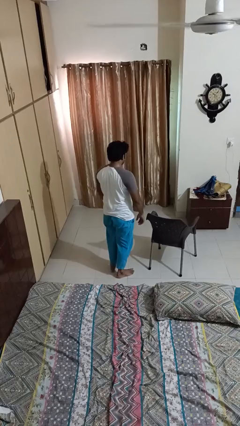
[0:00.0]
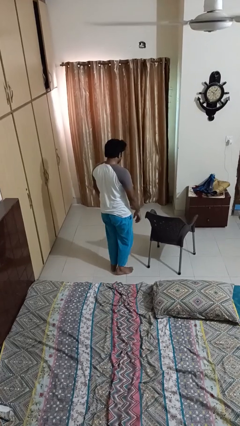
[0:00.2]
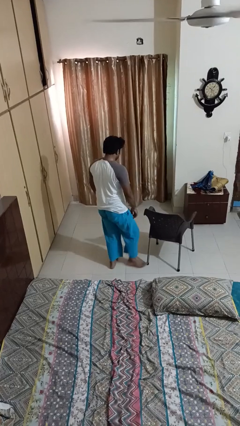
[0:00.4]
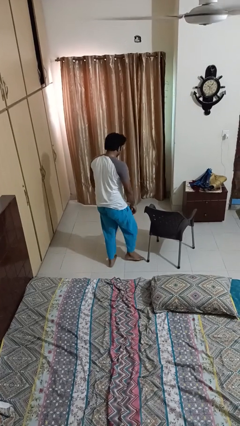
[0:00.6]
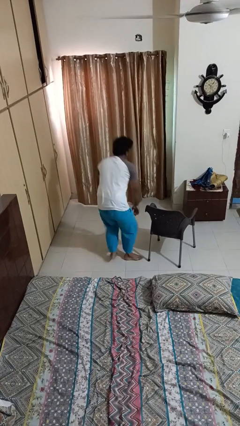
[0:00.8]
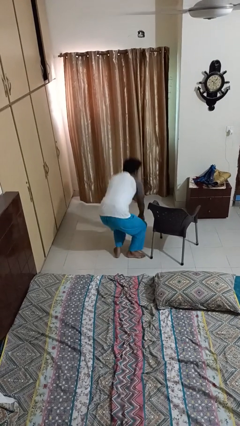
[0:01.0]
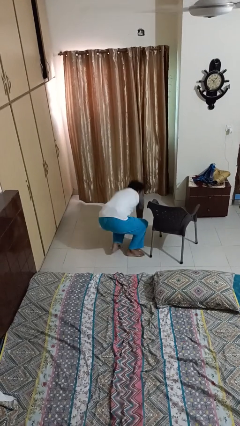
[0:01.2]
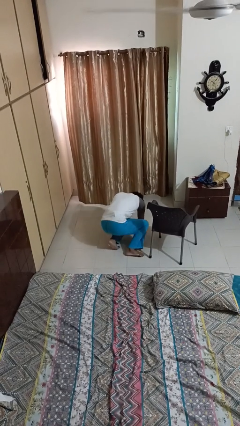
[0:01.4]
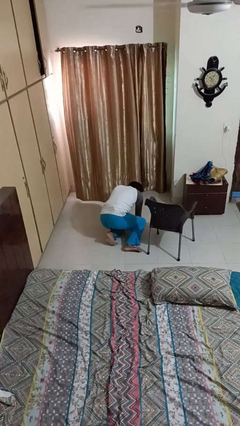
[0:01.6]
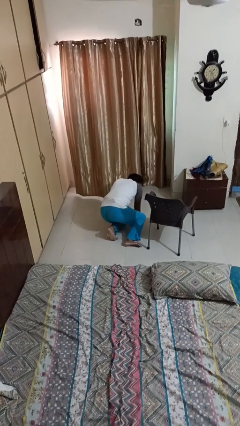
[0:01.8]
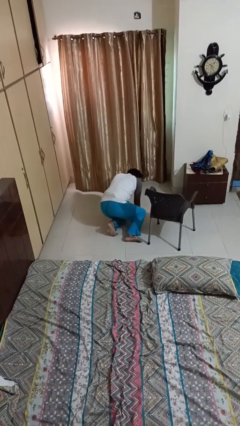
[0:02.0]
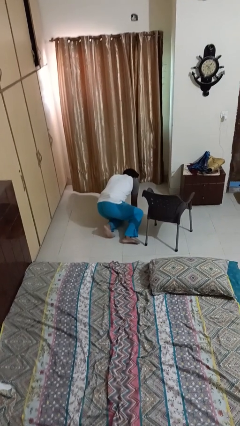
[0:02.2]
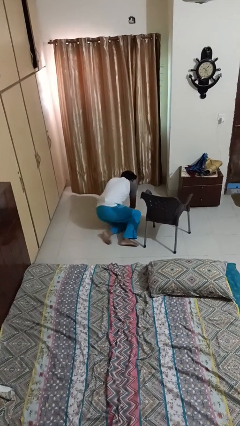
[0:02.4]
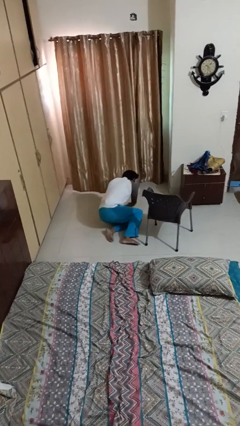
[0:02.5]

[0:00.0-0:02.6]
person trips on object on floor

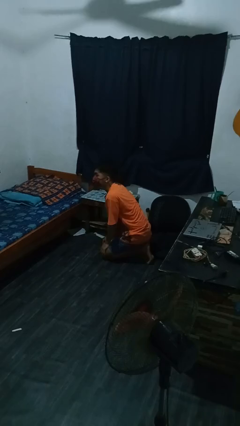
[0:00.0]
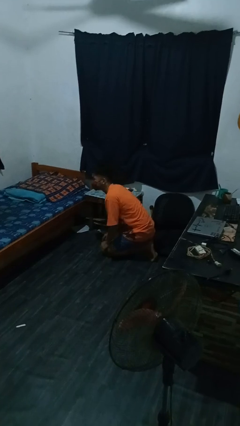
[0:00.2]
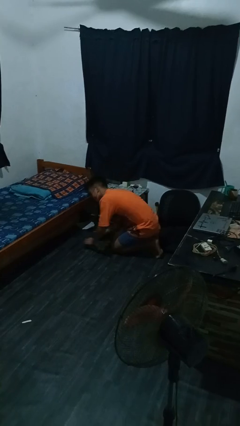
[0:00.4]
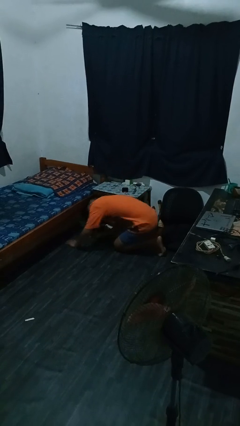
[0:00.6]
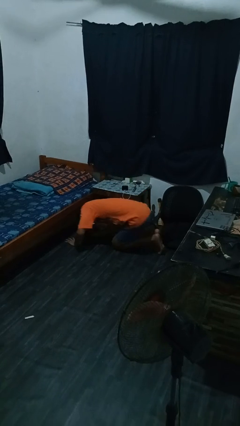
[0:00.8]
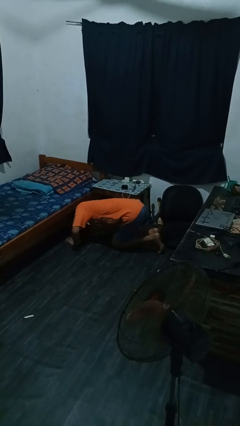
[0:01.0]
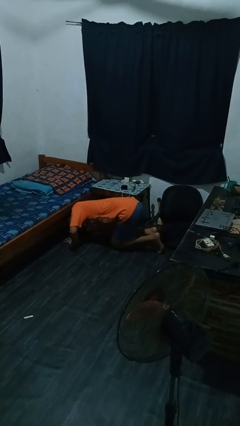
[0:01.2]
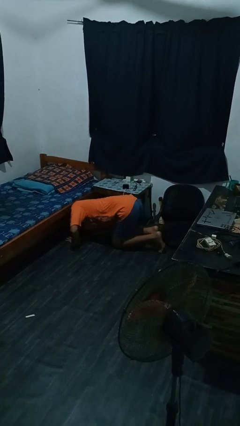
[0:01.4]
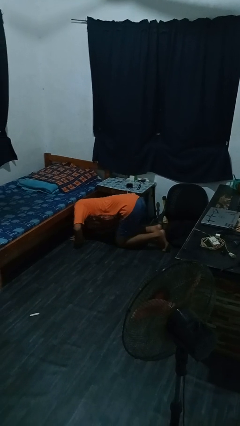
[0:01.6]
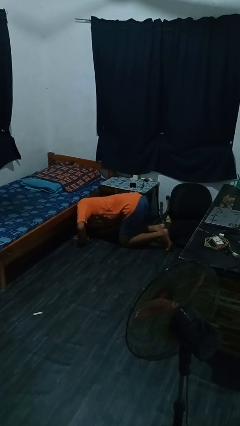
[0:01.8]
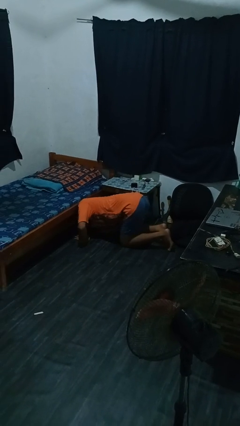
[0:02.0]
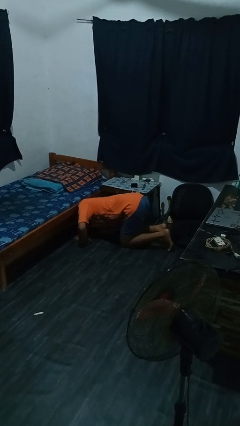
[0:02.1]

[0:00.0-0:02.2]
person searches under bed

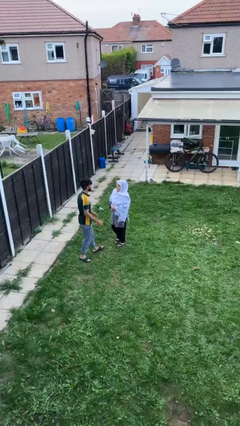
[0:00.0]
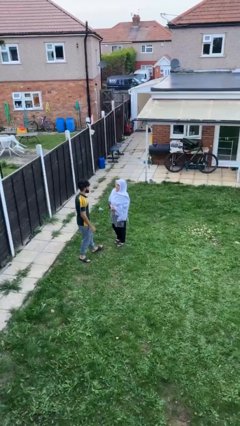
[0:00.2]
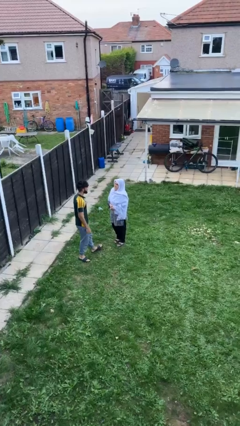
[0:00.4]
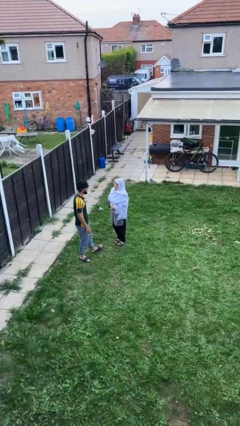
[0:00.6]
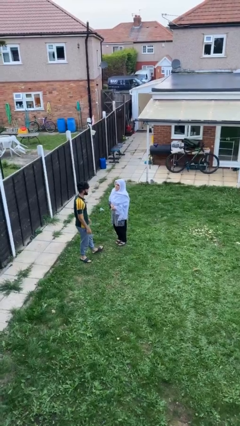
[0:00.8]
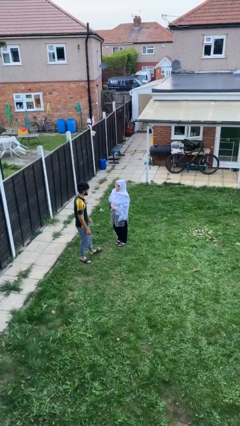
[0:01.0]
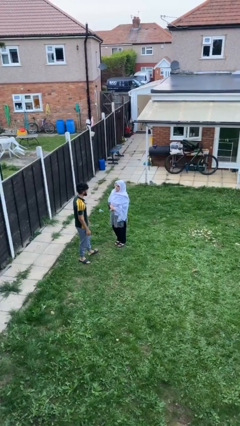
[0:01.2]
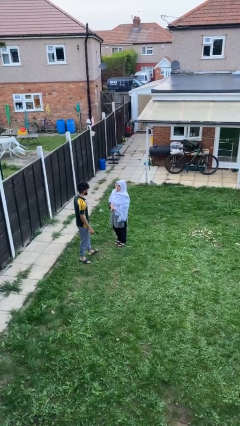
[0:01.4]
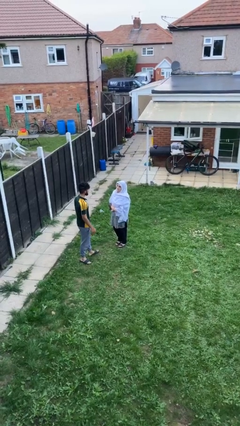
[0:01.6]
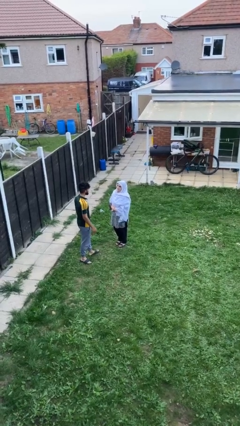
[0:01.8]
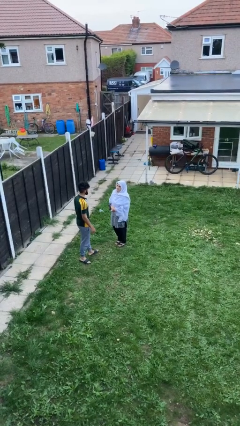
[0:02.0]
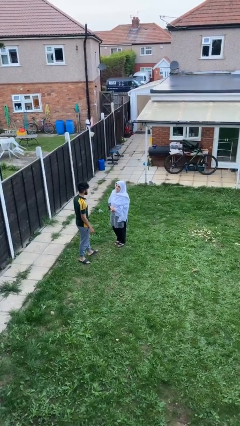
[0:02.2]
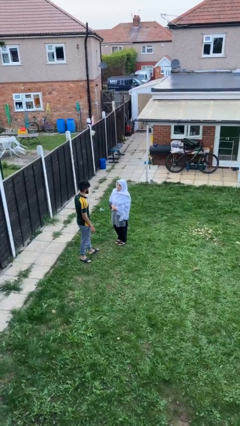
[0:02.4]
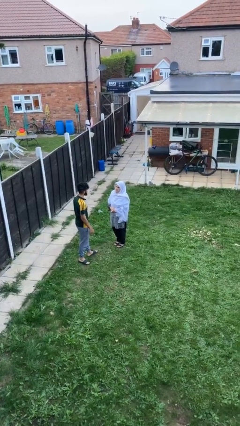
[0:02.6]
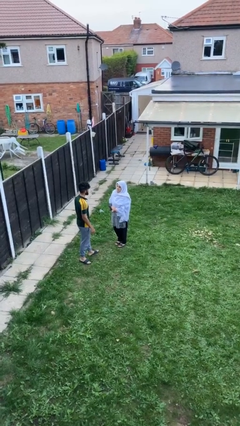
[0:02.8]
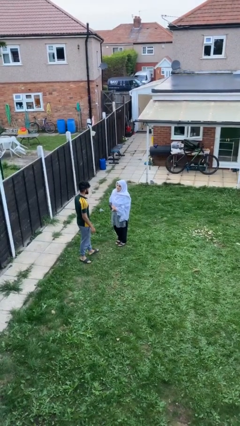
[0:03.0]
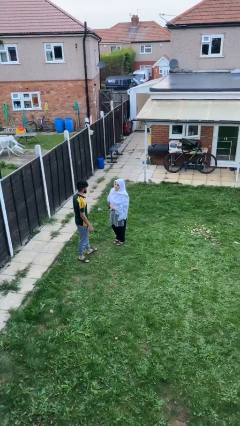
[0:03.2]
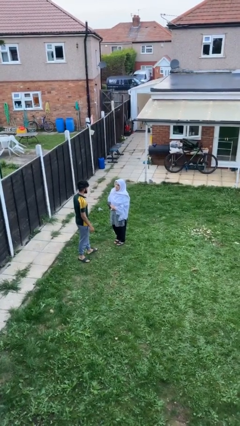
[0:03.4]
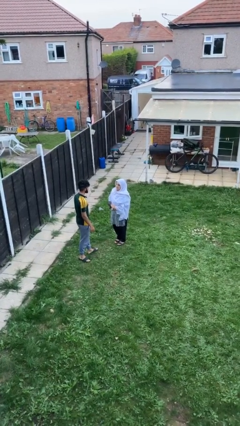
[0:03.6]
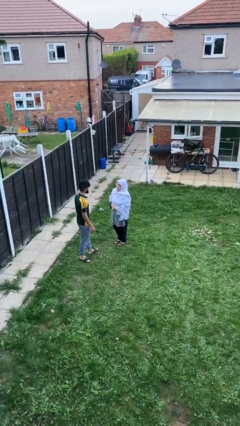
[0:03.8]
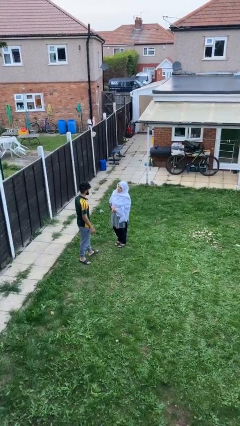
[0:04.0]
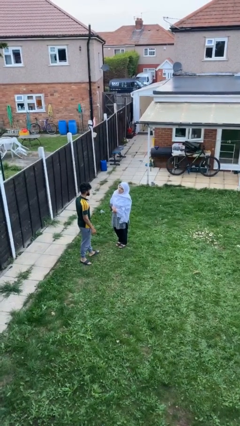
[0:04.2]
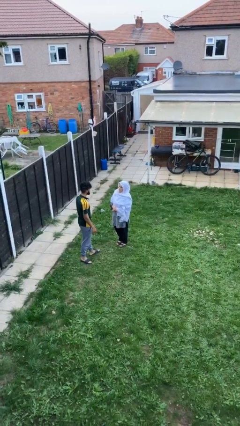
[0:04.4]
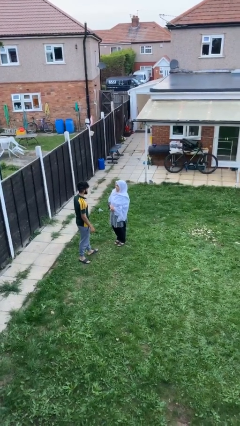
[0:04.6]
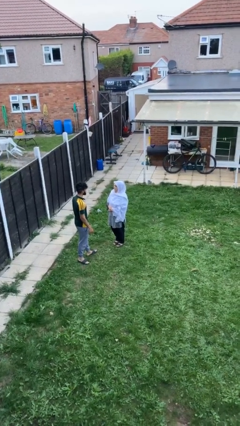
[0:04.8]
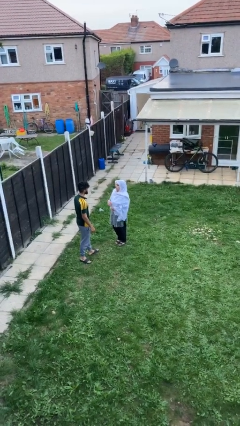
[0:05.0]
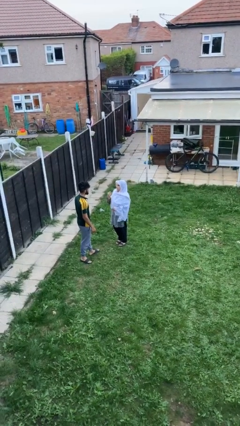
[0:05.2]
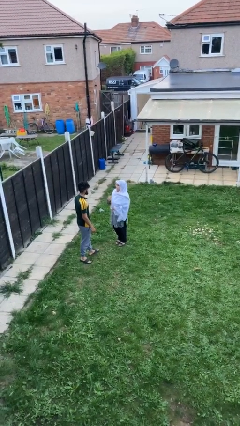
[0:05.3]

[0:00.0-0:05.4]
person talks to person

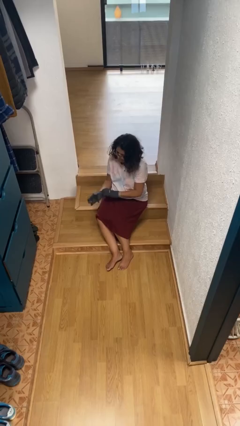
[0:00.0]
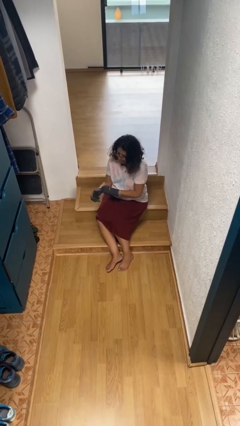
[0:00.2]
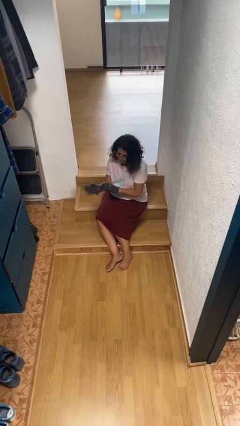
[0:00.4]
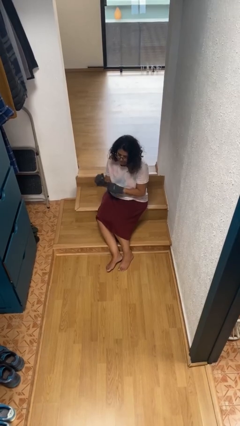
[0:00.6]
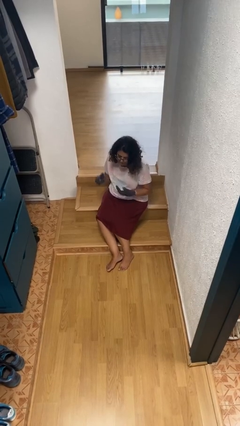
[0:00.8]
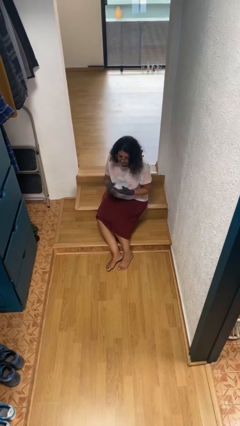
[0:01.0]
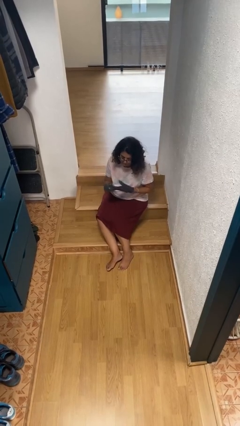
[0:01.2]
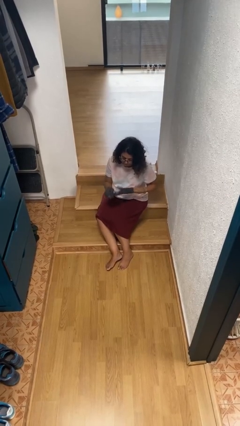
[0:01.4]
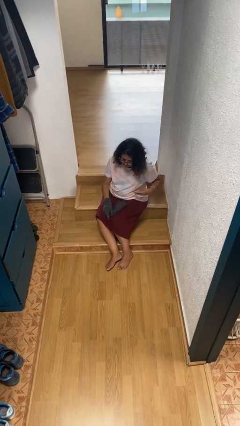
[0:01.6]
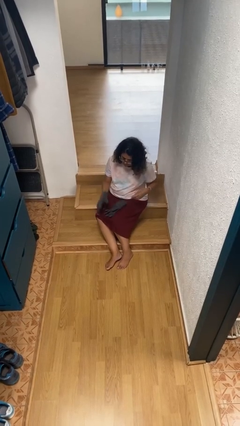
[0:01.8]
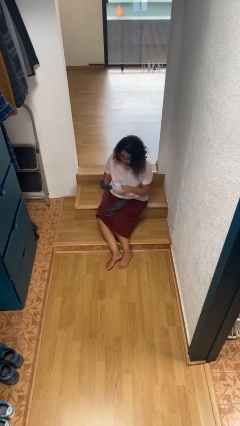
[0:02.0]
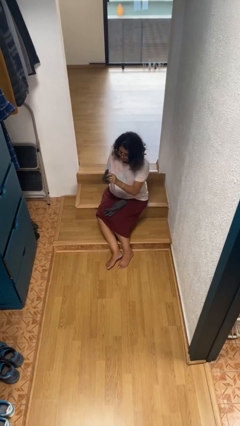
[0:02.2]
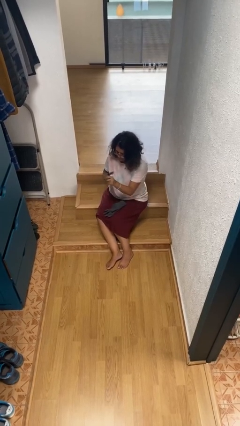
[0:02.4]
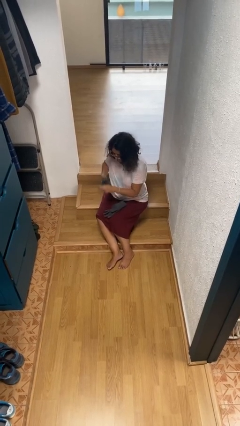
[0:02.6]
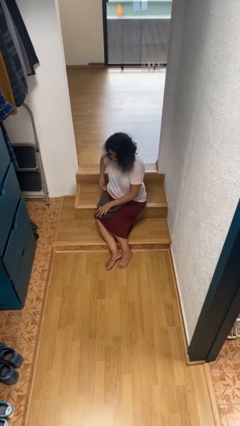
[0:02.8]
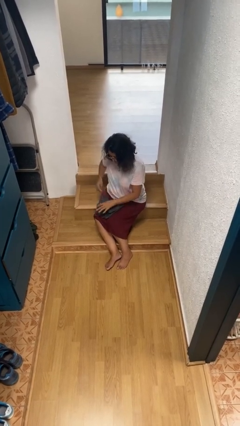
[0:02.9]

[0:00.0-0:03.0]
person takes off gloves

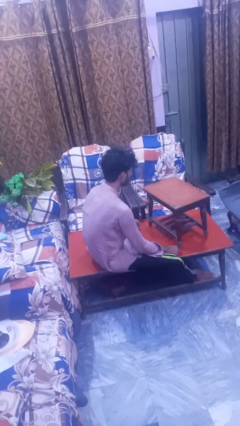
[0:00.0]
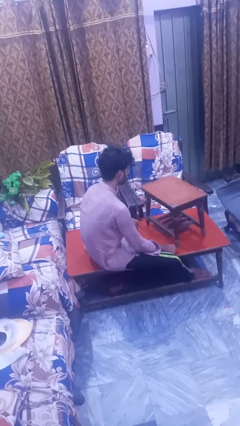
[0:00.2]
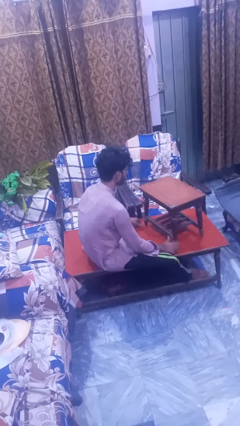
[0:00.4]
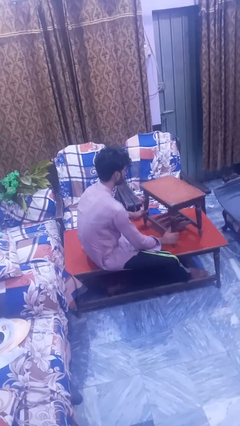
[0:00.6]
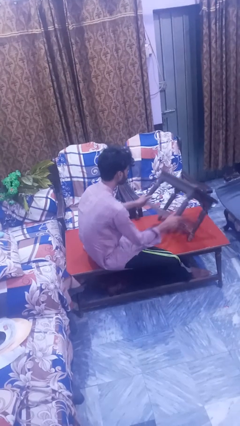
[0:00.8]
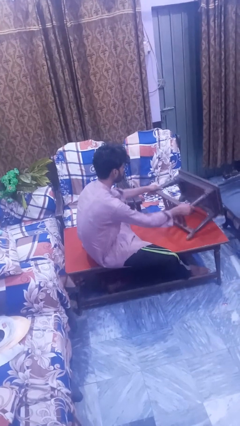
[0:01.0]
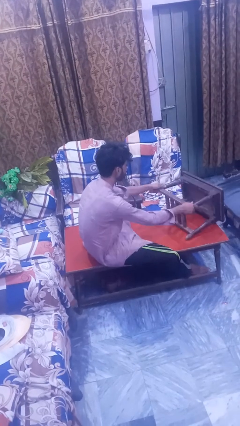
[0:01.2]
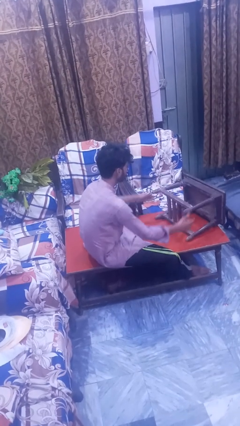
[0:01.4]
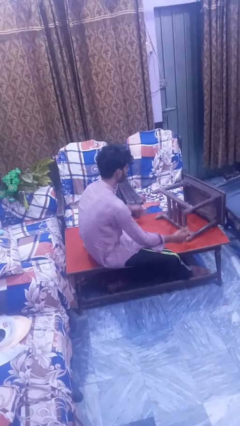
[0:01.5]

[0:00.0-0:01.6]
person knocks over furniture

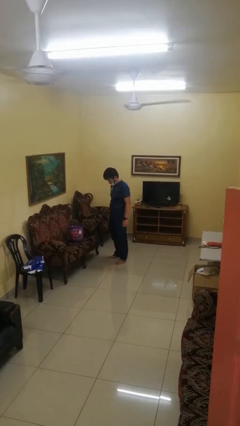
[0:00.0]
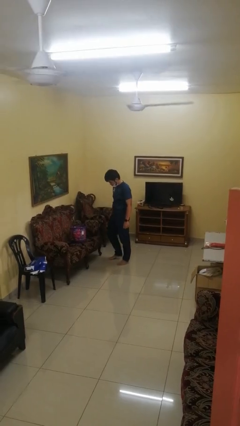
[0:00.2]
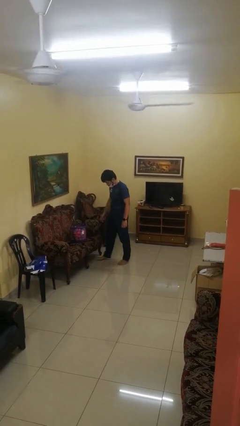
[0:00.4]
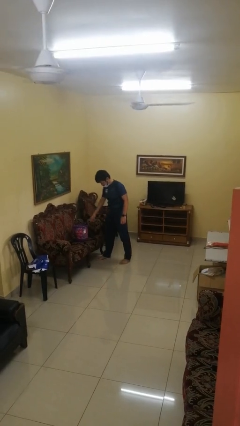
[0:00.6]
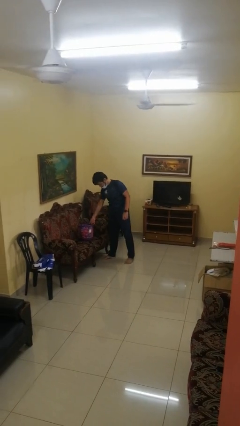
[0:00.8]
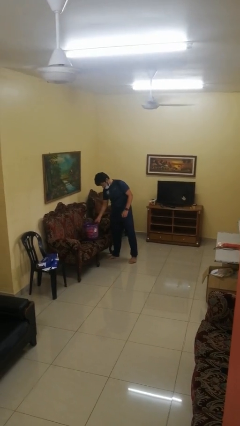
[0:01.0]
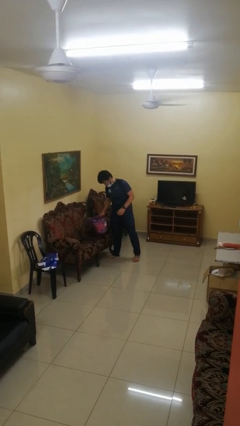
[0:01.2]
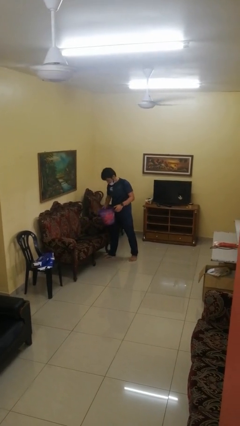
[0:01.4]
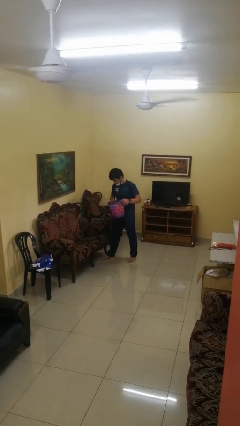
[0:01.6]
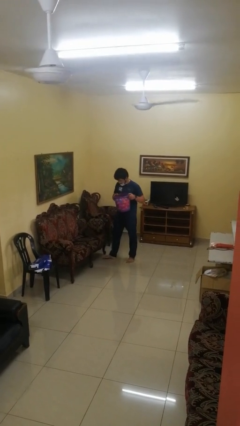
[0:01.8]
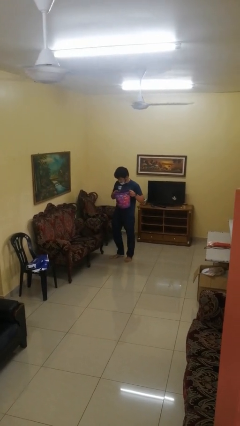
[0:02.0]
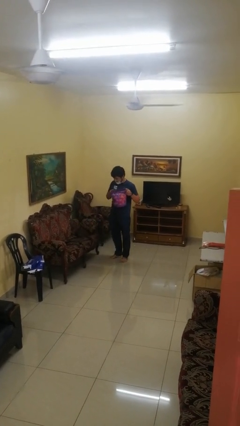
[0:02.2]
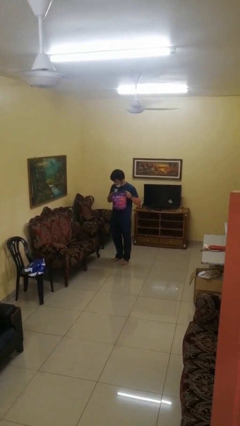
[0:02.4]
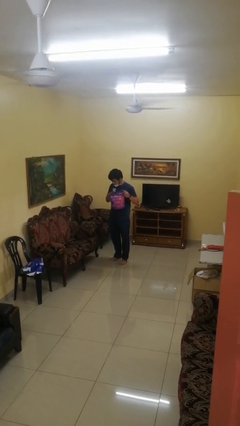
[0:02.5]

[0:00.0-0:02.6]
person picks up object from couch
